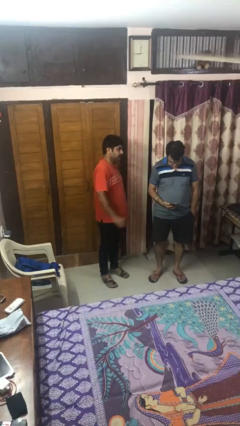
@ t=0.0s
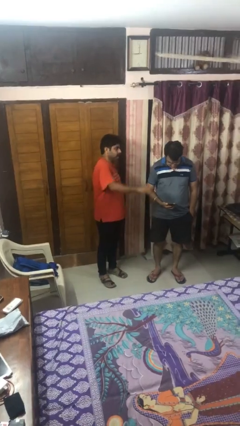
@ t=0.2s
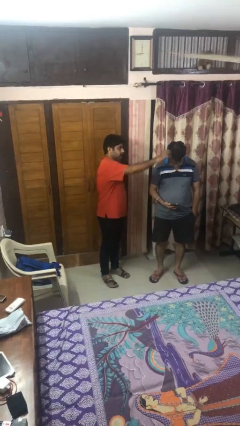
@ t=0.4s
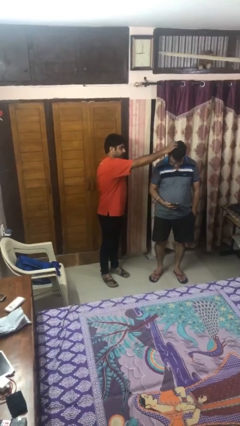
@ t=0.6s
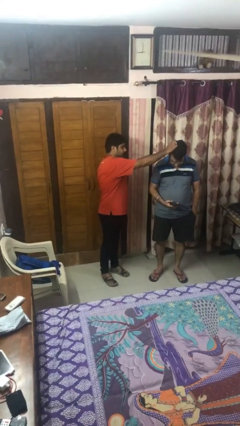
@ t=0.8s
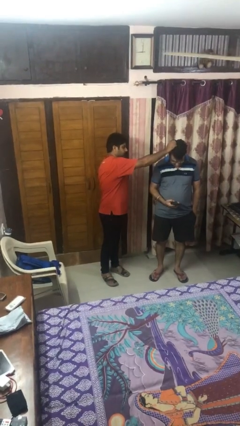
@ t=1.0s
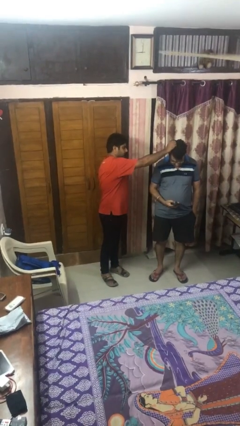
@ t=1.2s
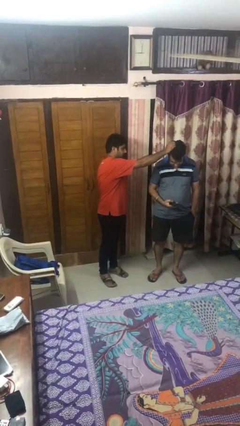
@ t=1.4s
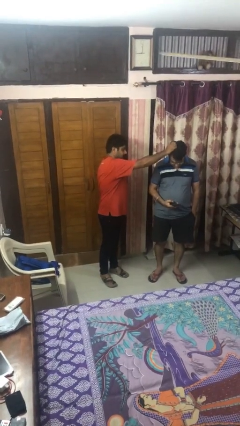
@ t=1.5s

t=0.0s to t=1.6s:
person grabs person by hair

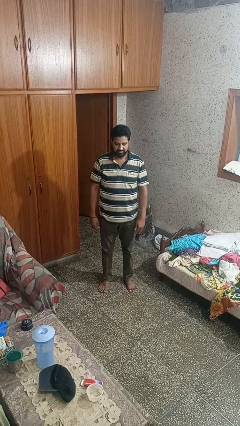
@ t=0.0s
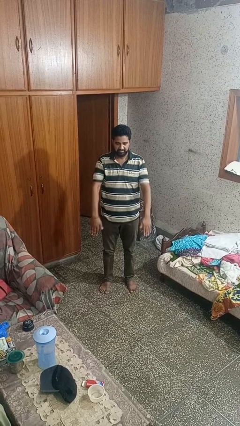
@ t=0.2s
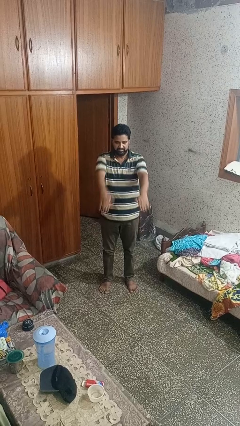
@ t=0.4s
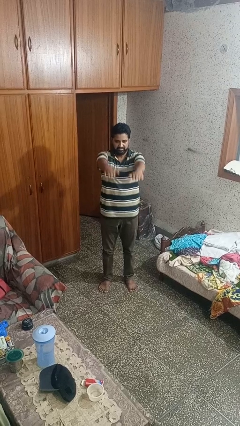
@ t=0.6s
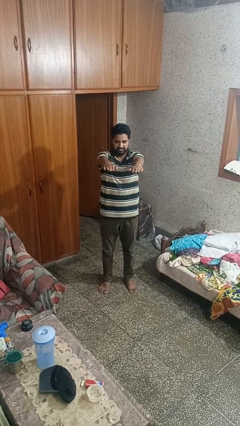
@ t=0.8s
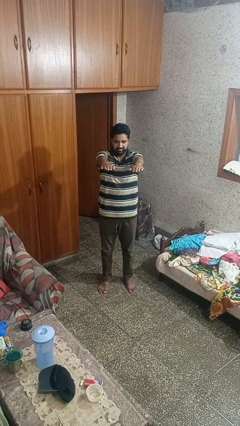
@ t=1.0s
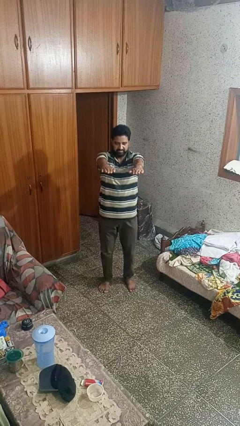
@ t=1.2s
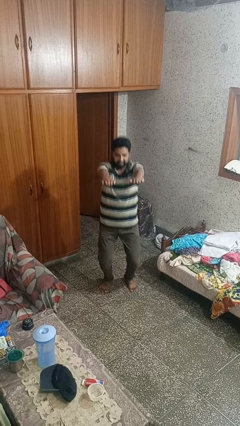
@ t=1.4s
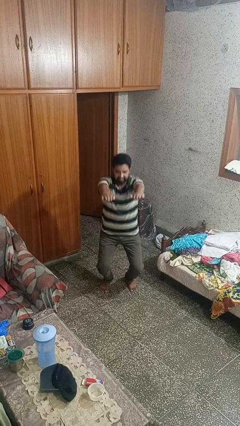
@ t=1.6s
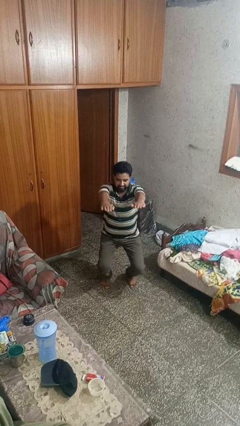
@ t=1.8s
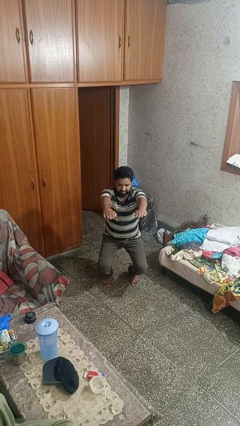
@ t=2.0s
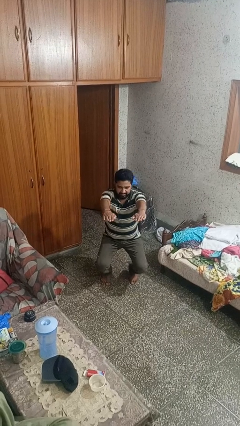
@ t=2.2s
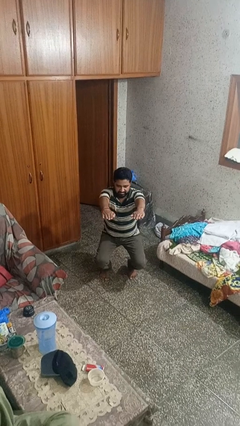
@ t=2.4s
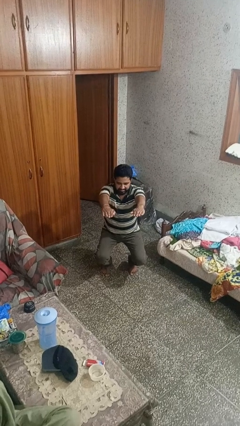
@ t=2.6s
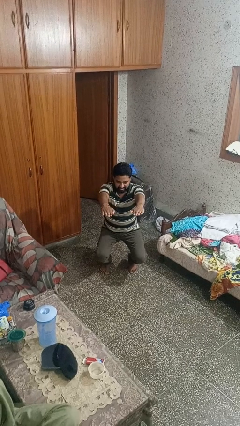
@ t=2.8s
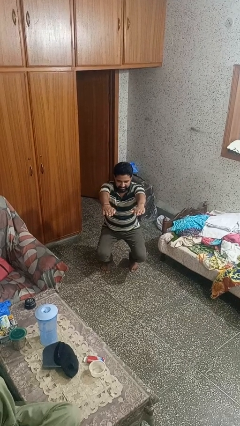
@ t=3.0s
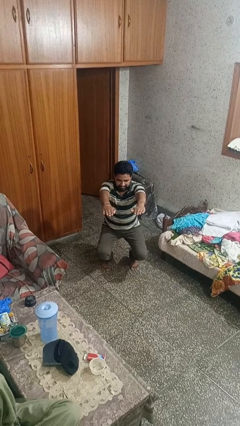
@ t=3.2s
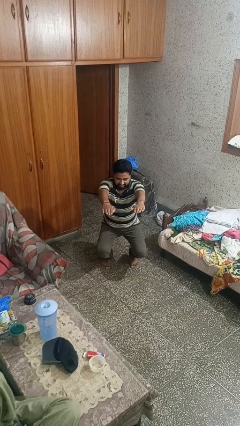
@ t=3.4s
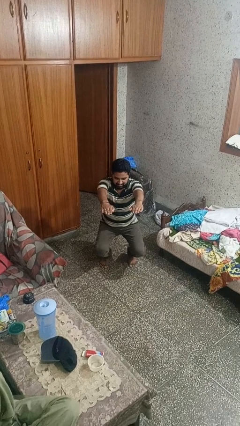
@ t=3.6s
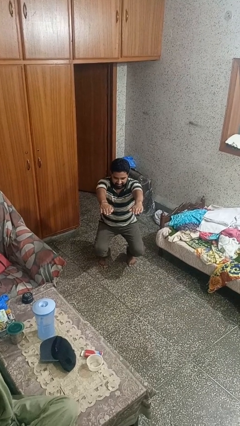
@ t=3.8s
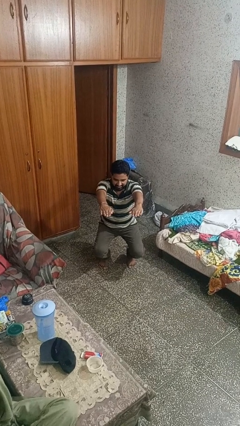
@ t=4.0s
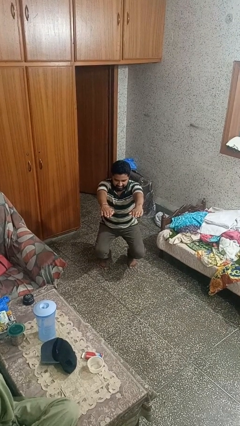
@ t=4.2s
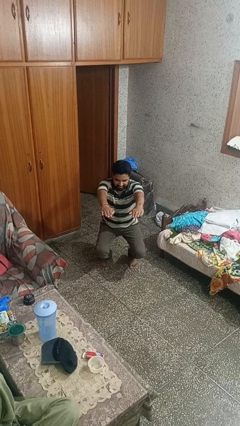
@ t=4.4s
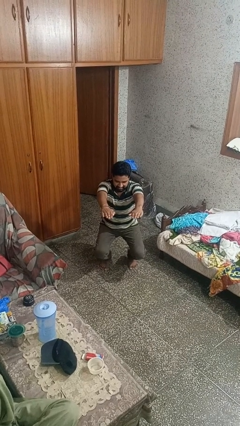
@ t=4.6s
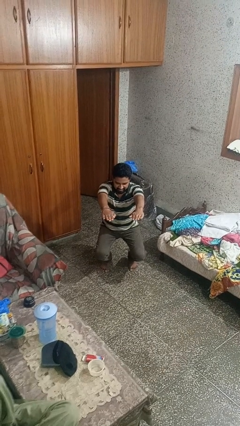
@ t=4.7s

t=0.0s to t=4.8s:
person squats

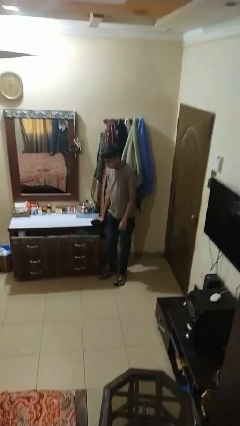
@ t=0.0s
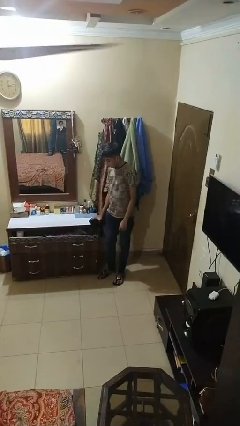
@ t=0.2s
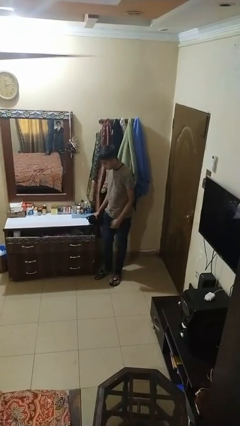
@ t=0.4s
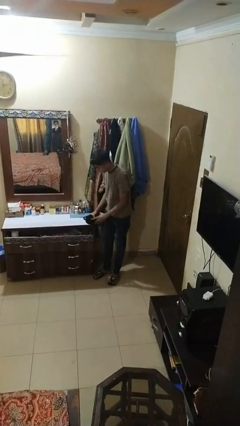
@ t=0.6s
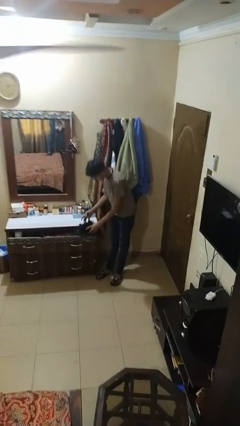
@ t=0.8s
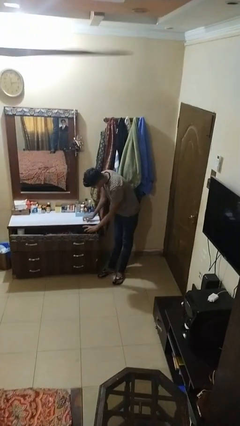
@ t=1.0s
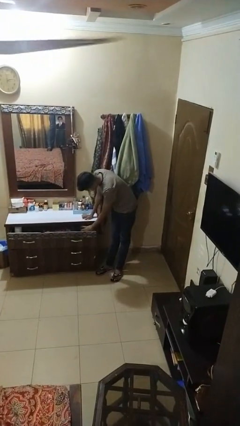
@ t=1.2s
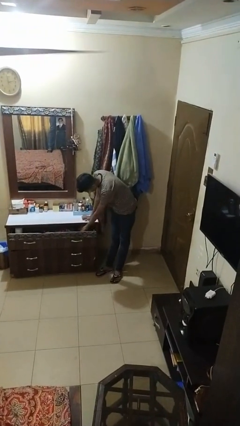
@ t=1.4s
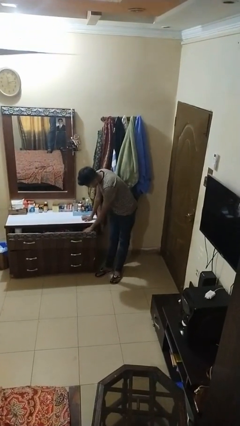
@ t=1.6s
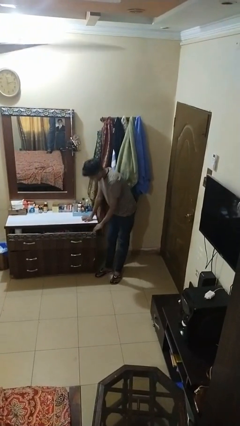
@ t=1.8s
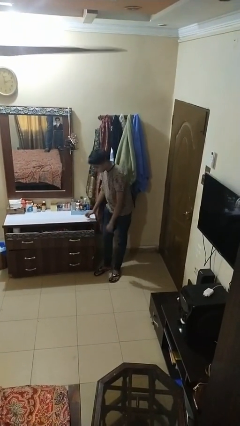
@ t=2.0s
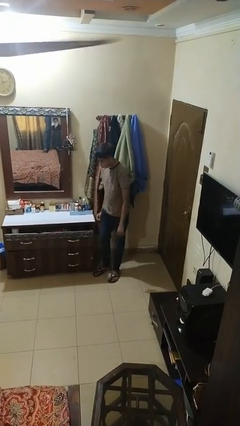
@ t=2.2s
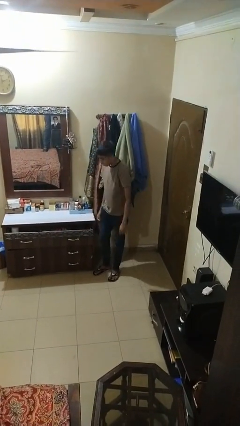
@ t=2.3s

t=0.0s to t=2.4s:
person puts clothes into dresser

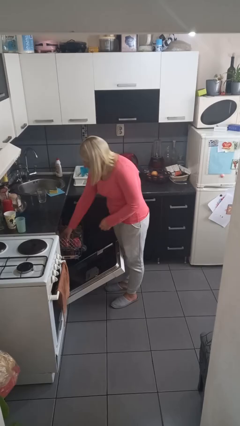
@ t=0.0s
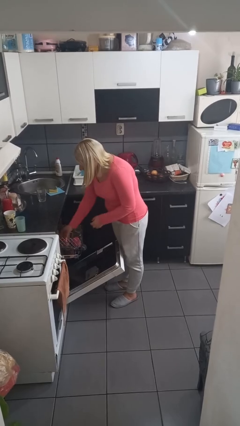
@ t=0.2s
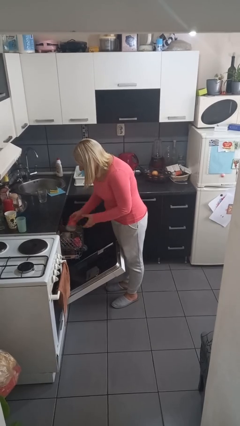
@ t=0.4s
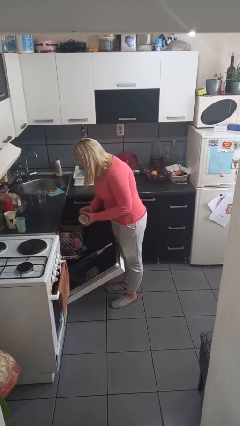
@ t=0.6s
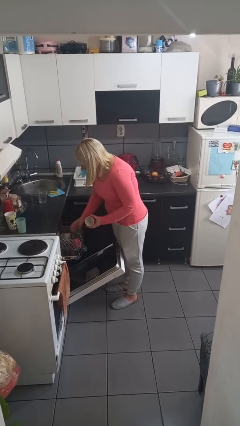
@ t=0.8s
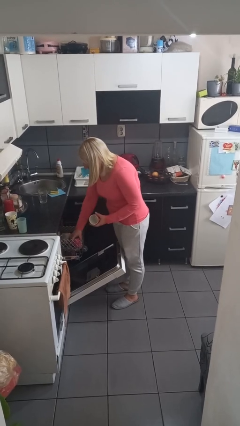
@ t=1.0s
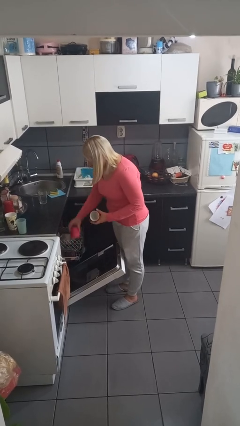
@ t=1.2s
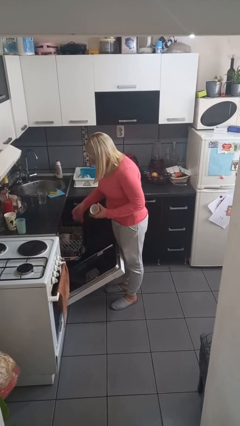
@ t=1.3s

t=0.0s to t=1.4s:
person unloads dishwasher

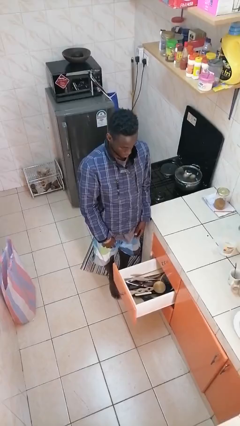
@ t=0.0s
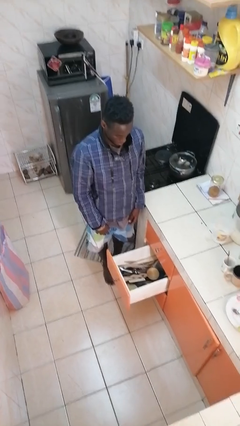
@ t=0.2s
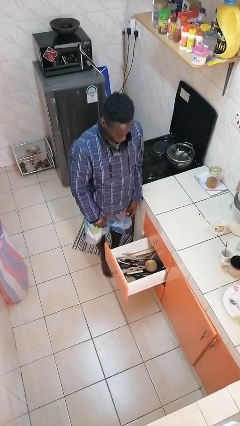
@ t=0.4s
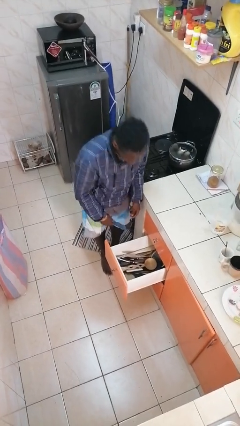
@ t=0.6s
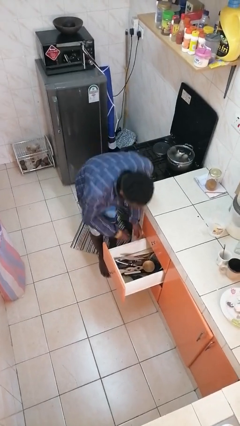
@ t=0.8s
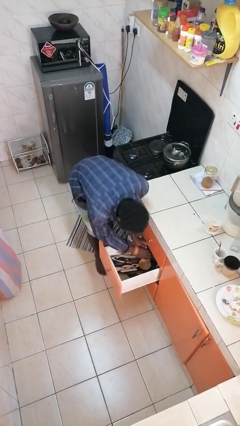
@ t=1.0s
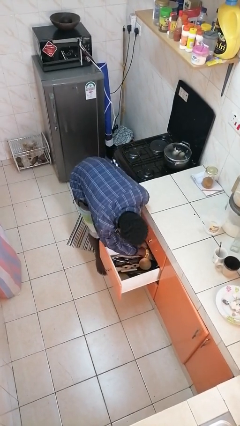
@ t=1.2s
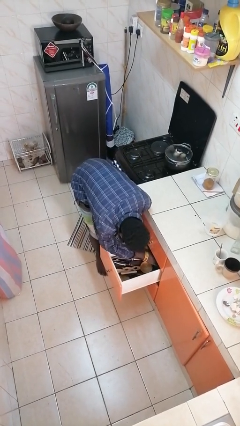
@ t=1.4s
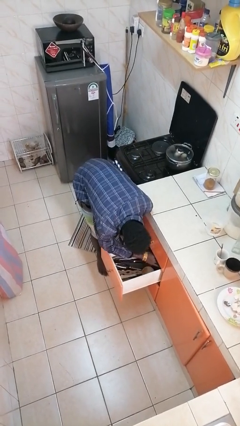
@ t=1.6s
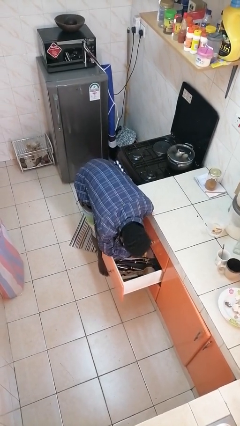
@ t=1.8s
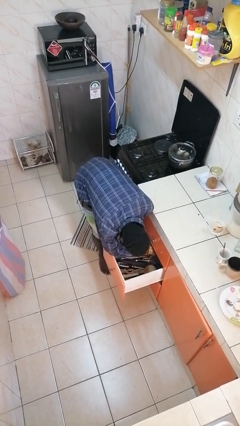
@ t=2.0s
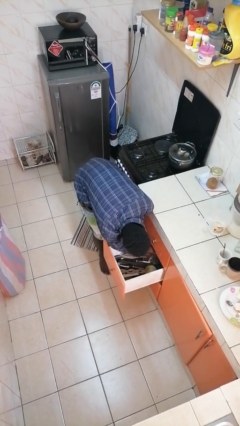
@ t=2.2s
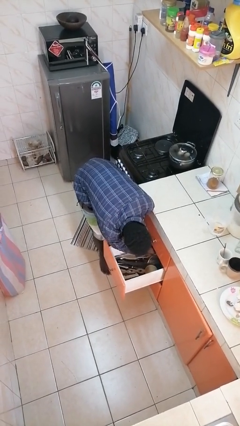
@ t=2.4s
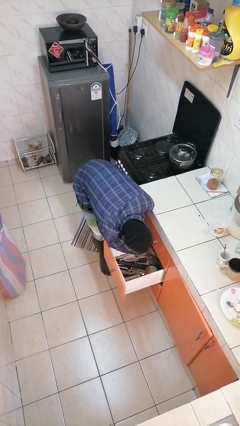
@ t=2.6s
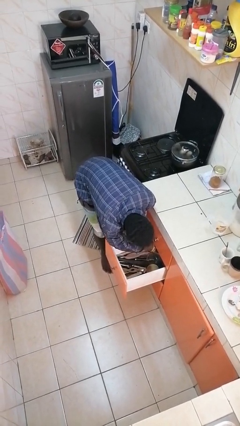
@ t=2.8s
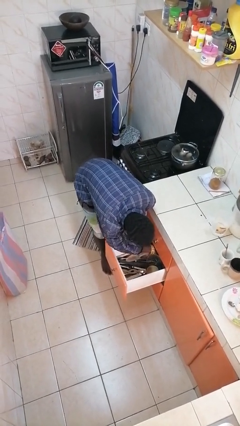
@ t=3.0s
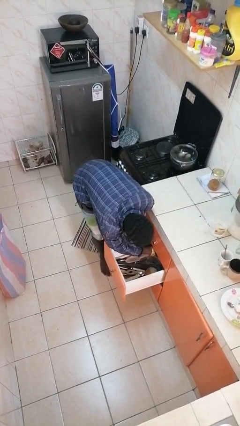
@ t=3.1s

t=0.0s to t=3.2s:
person searches in kitchen drawer

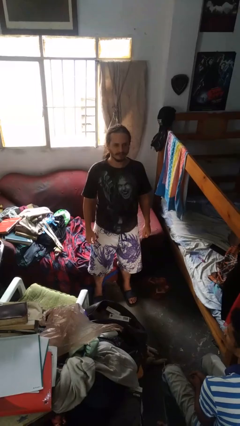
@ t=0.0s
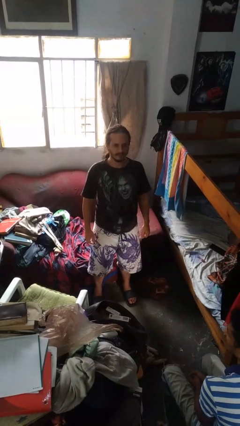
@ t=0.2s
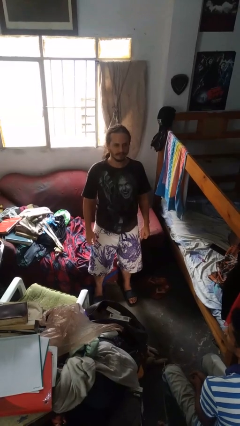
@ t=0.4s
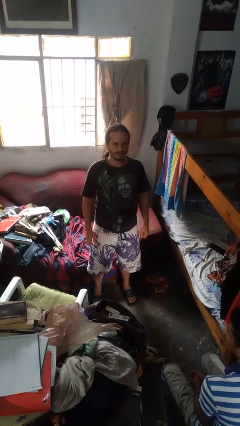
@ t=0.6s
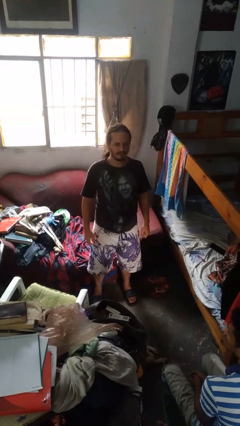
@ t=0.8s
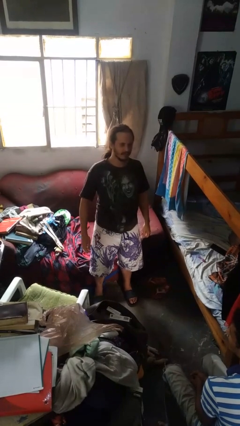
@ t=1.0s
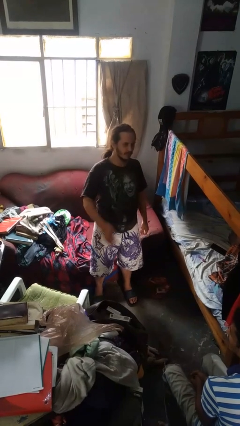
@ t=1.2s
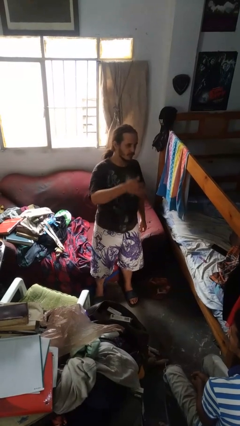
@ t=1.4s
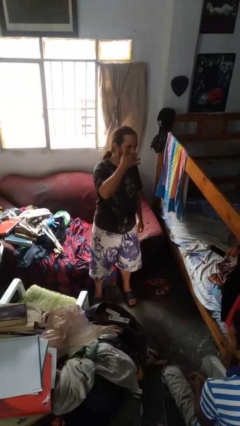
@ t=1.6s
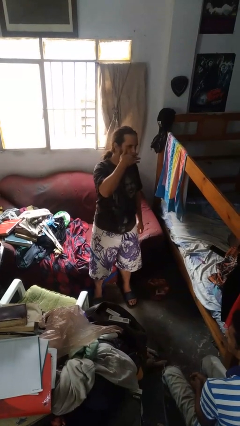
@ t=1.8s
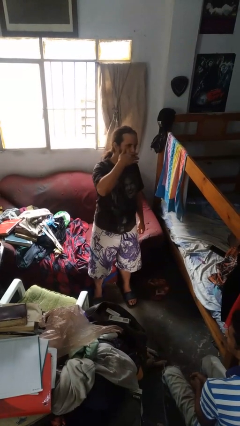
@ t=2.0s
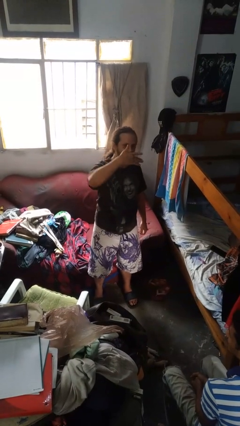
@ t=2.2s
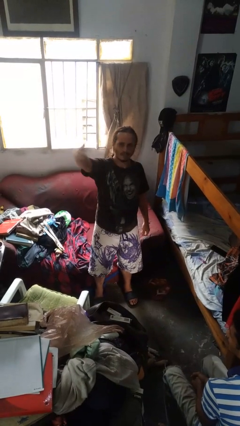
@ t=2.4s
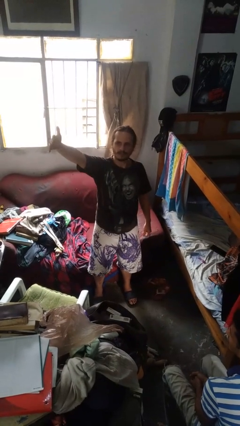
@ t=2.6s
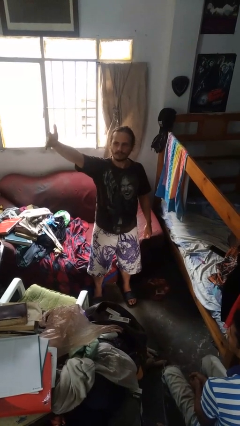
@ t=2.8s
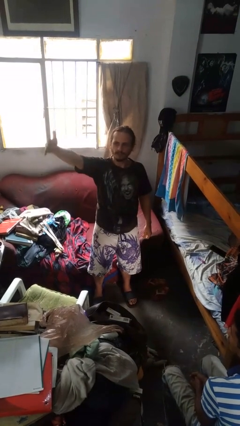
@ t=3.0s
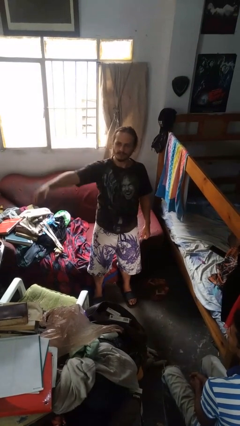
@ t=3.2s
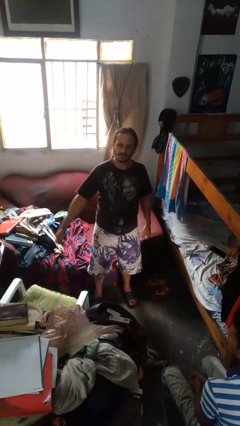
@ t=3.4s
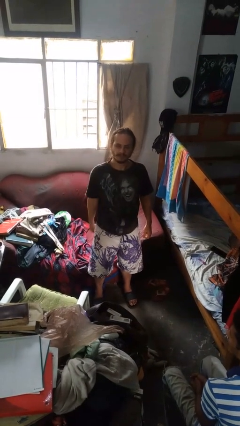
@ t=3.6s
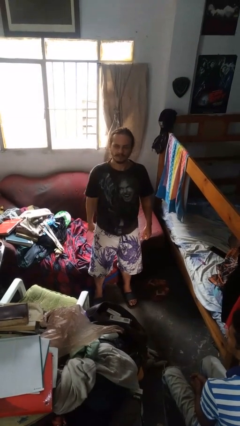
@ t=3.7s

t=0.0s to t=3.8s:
person gestures blow kiss
